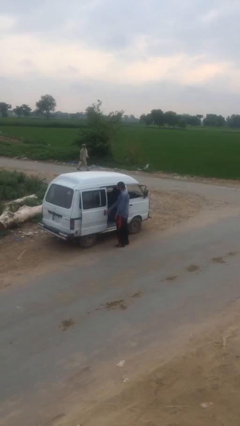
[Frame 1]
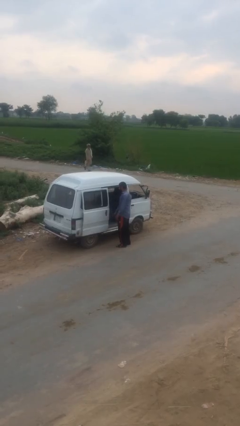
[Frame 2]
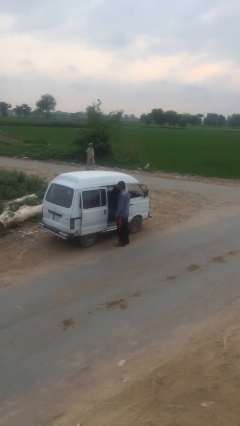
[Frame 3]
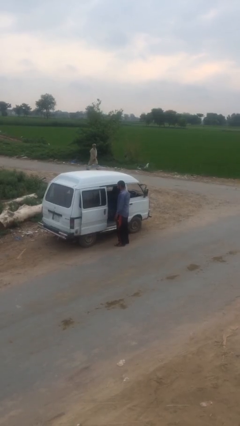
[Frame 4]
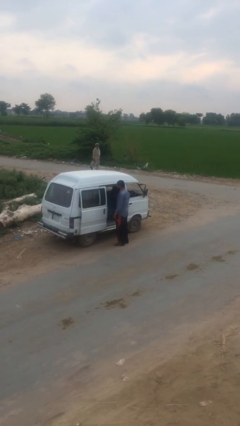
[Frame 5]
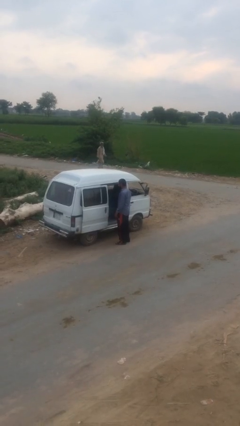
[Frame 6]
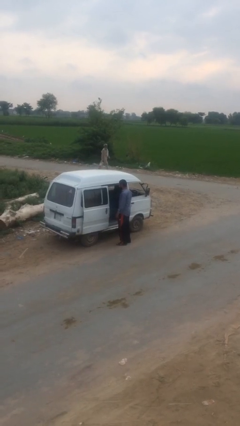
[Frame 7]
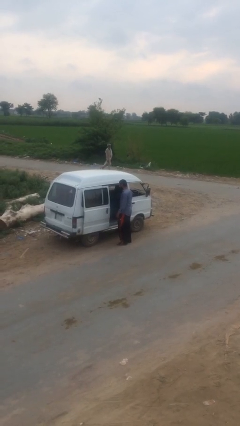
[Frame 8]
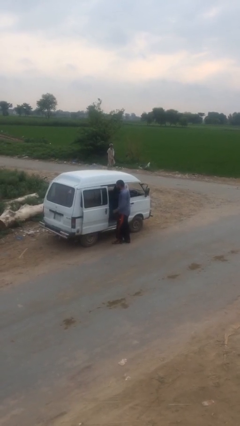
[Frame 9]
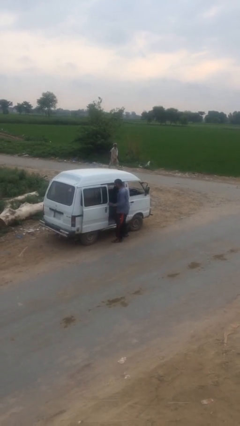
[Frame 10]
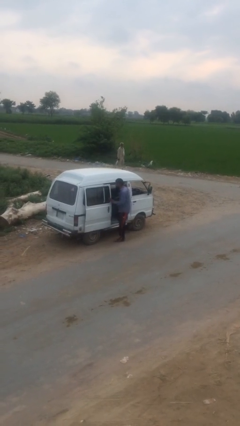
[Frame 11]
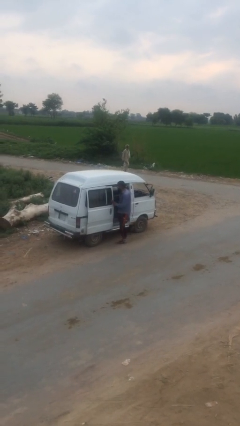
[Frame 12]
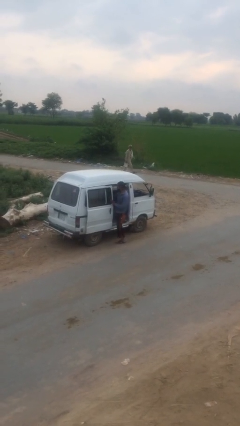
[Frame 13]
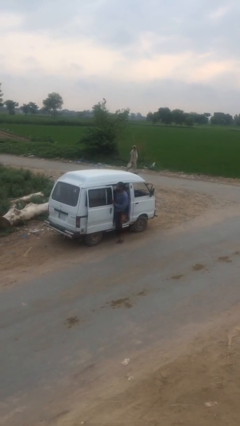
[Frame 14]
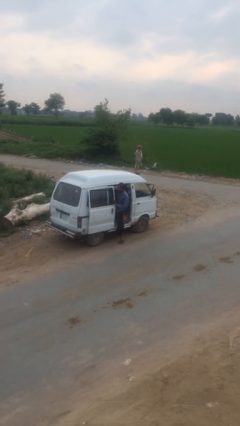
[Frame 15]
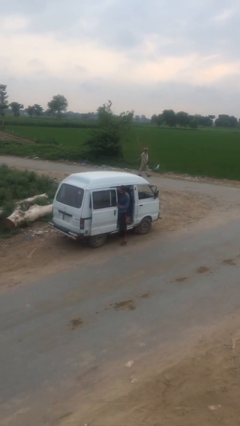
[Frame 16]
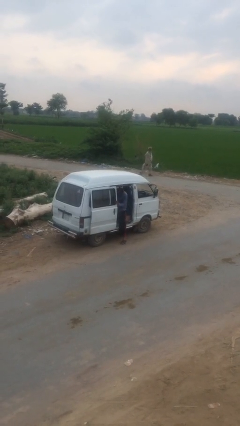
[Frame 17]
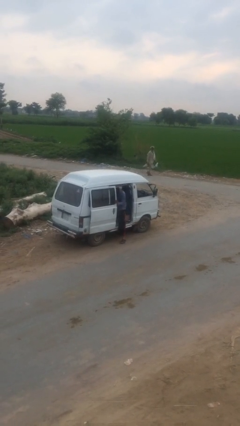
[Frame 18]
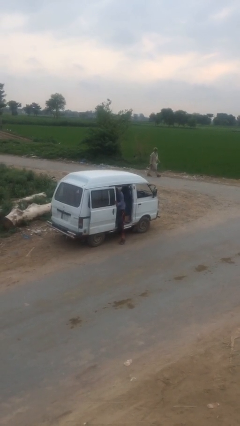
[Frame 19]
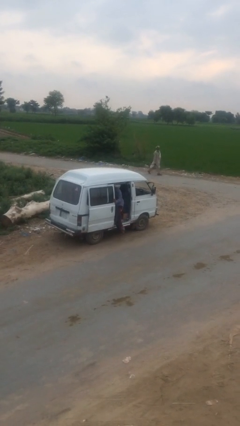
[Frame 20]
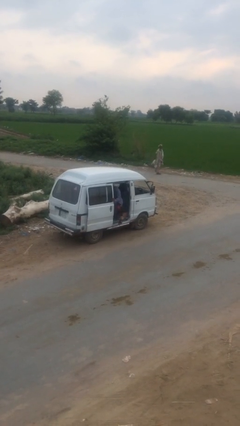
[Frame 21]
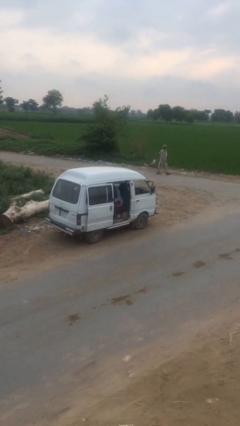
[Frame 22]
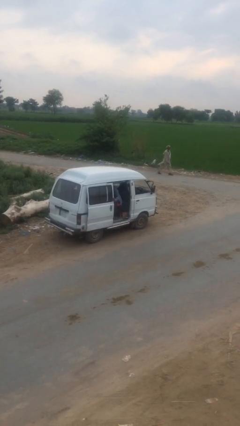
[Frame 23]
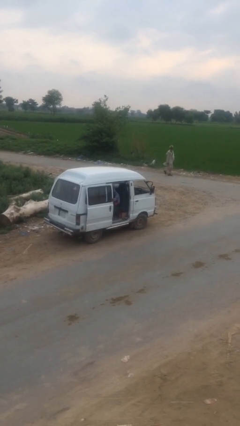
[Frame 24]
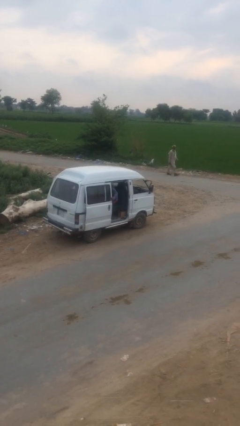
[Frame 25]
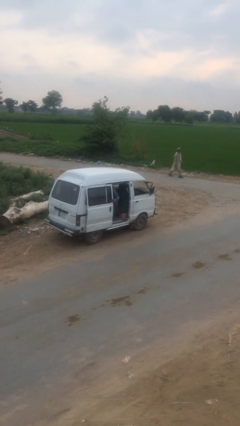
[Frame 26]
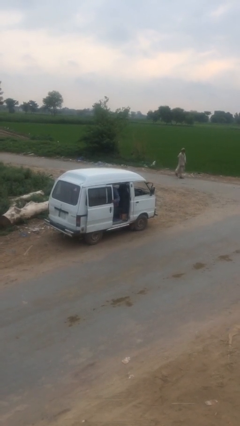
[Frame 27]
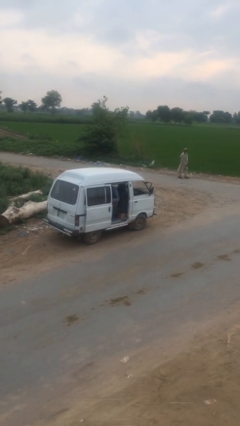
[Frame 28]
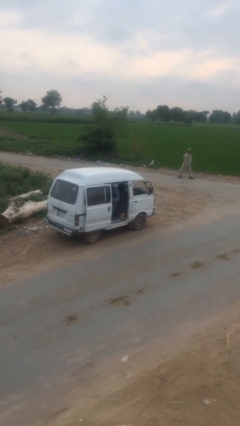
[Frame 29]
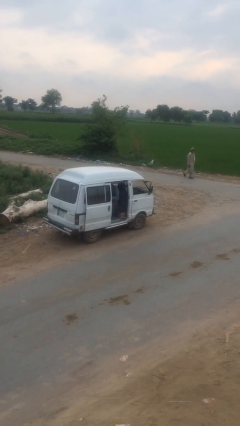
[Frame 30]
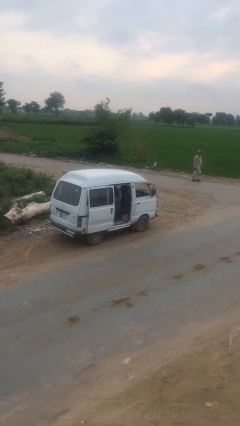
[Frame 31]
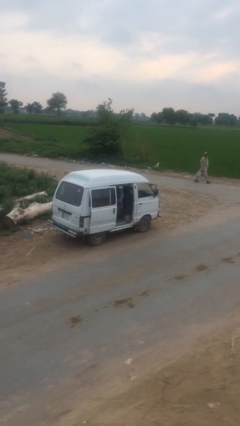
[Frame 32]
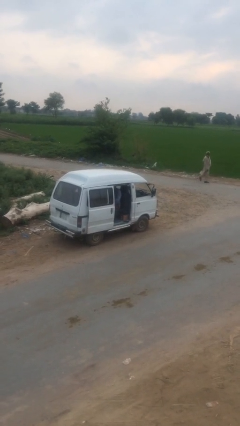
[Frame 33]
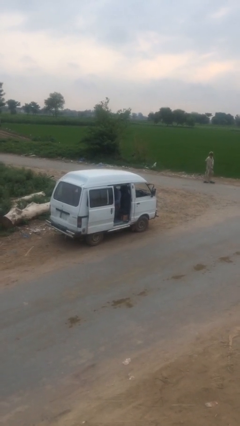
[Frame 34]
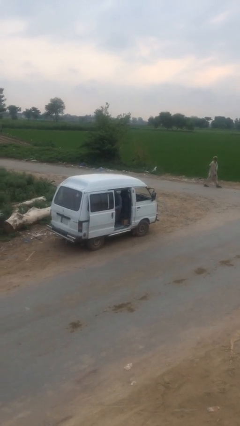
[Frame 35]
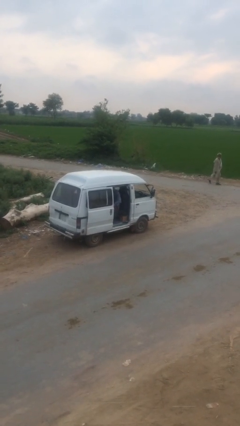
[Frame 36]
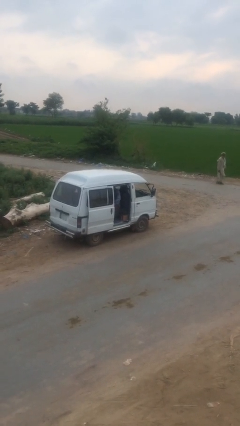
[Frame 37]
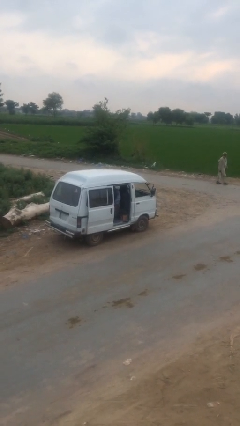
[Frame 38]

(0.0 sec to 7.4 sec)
person enters car

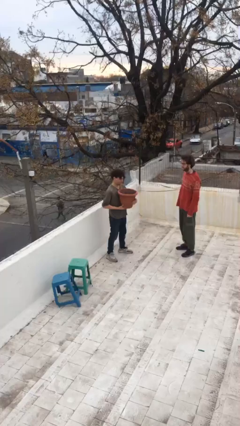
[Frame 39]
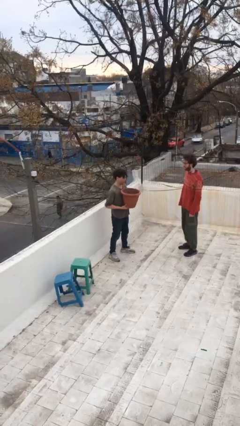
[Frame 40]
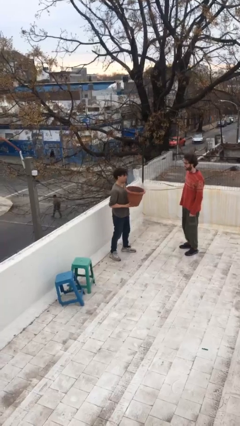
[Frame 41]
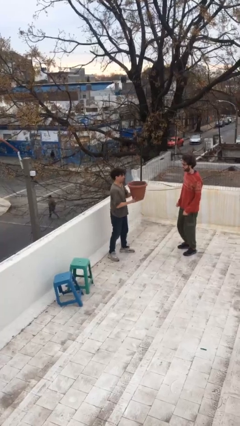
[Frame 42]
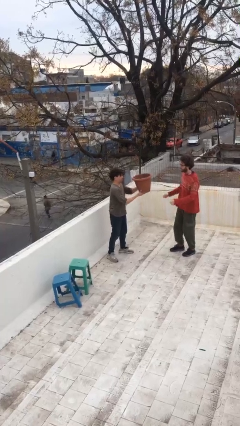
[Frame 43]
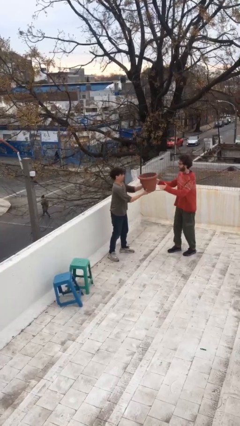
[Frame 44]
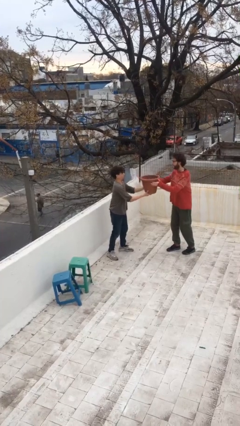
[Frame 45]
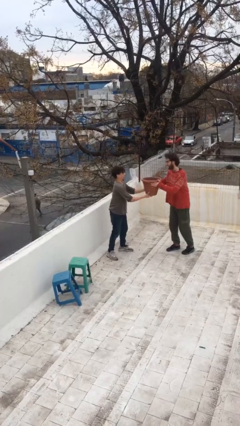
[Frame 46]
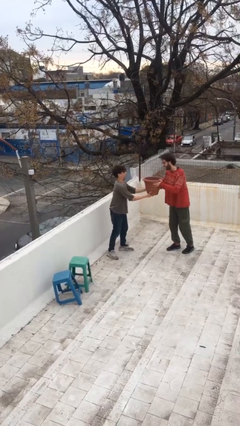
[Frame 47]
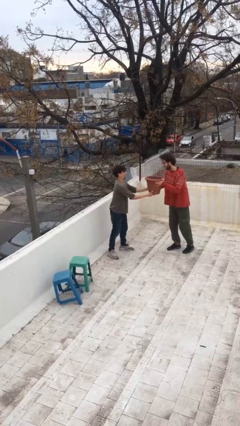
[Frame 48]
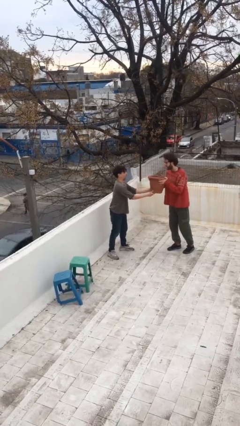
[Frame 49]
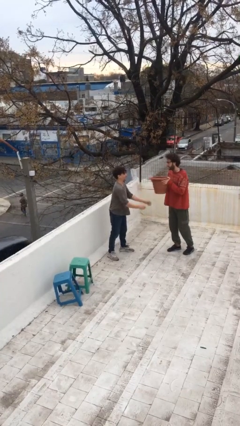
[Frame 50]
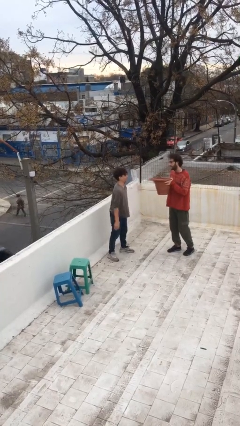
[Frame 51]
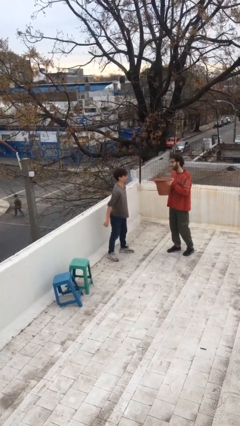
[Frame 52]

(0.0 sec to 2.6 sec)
person transfers object to person

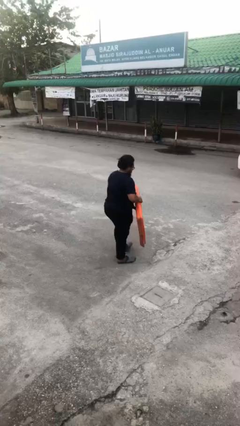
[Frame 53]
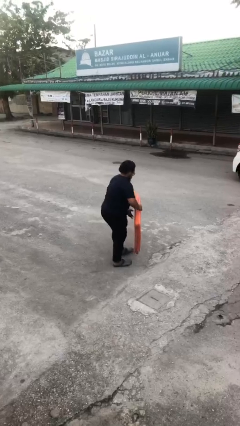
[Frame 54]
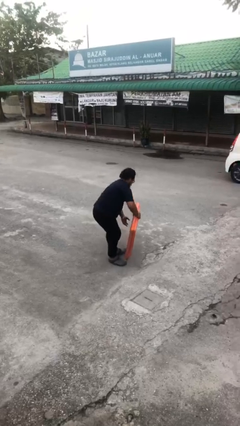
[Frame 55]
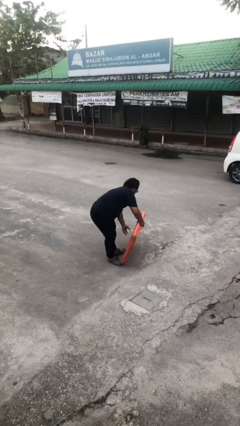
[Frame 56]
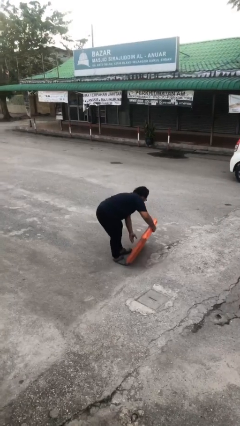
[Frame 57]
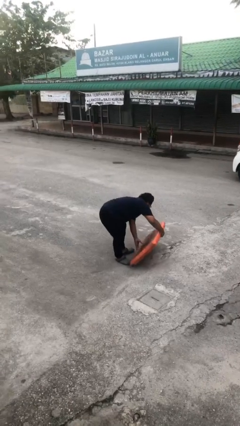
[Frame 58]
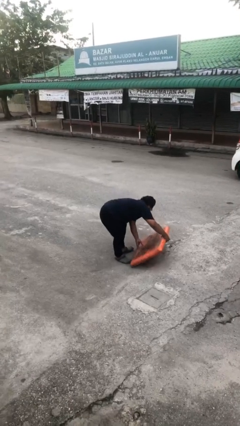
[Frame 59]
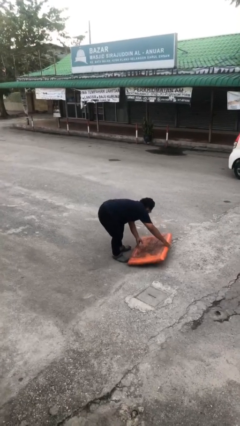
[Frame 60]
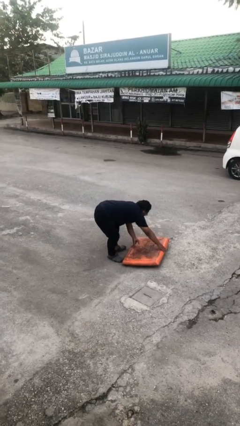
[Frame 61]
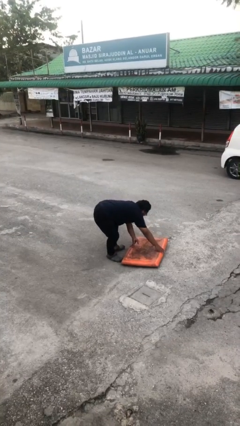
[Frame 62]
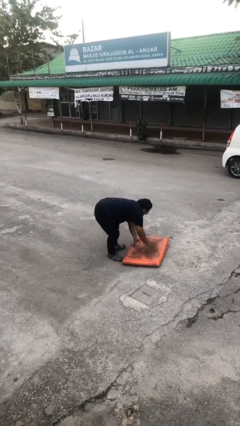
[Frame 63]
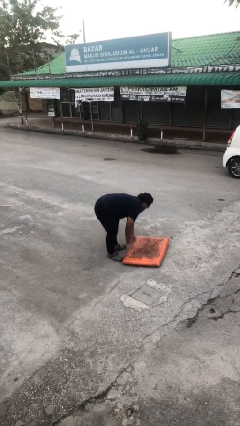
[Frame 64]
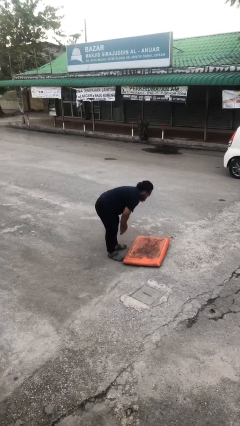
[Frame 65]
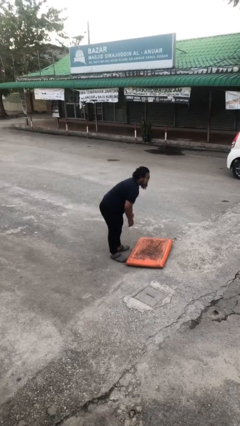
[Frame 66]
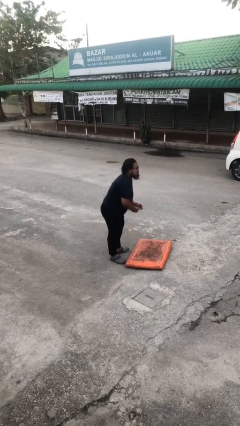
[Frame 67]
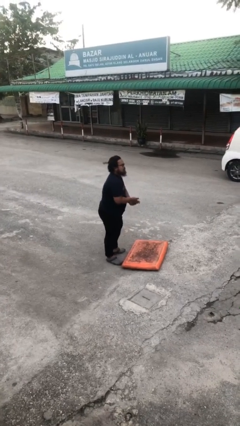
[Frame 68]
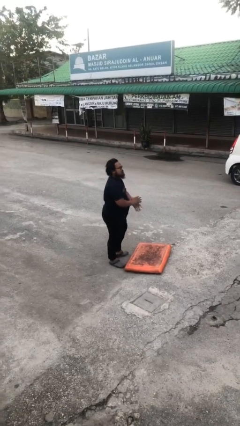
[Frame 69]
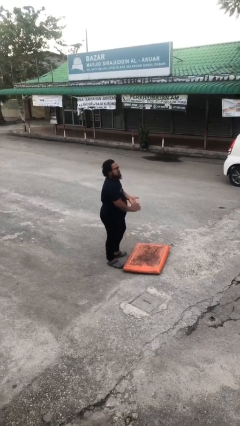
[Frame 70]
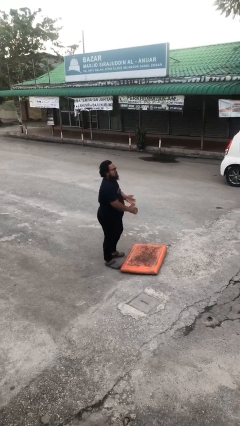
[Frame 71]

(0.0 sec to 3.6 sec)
person puts down object on floor

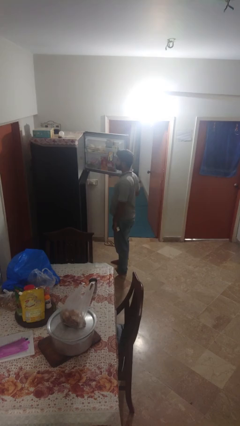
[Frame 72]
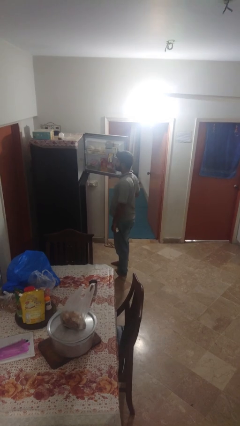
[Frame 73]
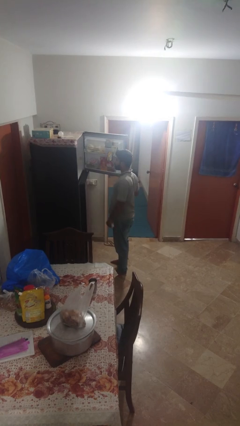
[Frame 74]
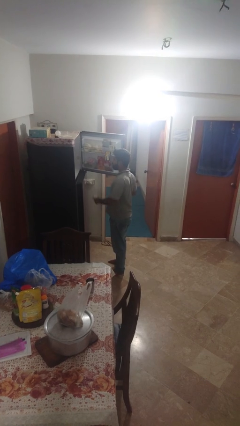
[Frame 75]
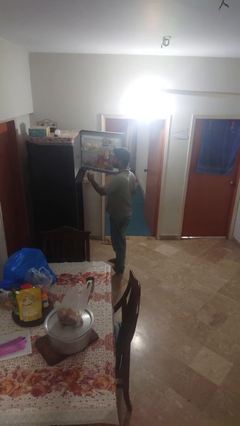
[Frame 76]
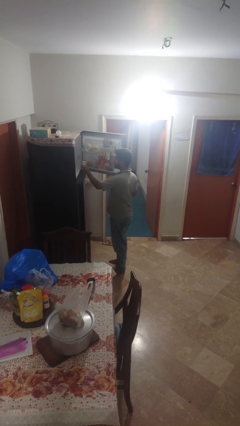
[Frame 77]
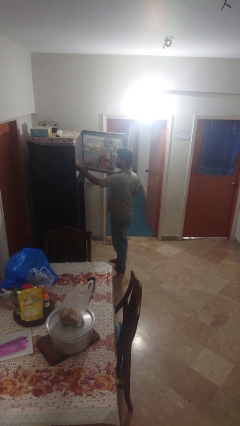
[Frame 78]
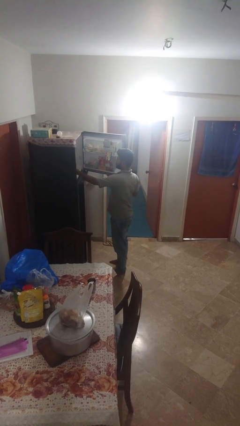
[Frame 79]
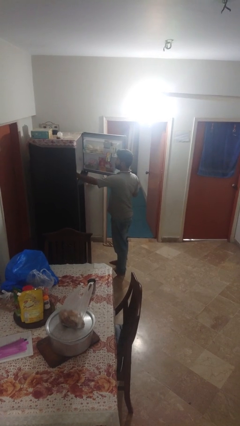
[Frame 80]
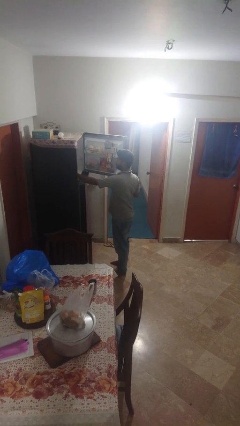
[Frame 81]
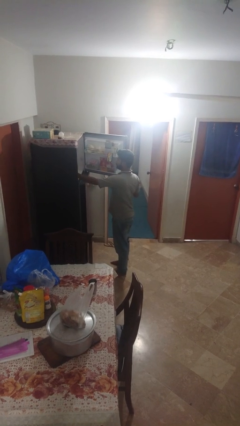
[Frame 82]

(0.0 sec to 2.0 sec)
person puts object into refrigerator

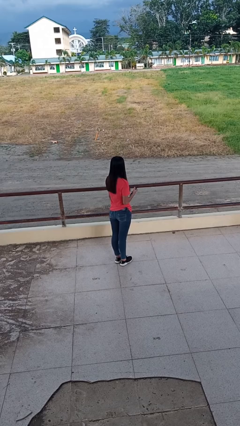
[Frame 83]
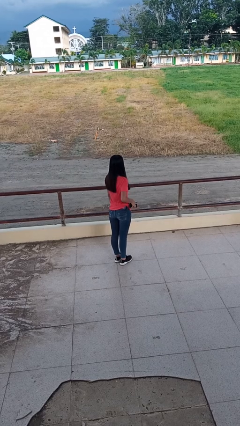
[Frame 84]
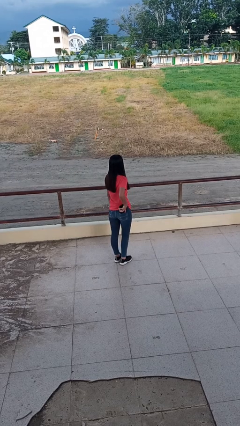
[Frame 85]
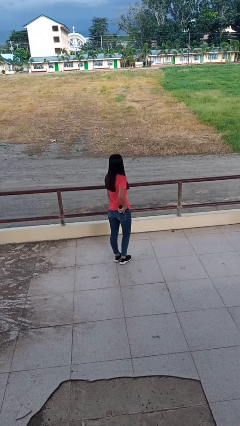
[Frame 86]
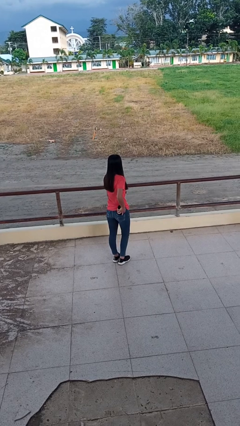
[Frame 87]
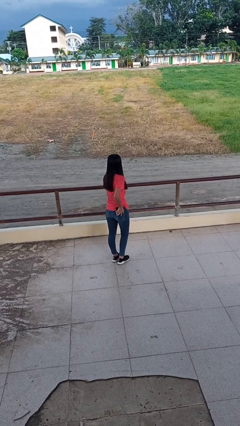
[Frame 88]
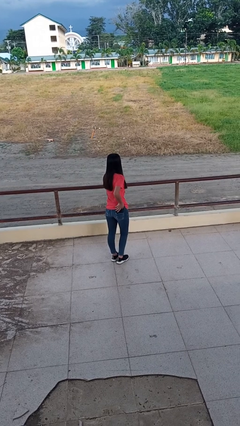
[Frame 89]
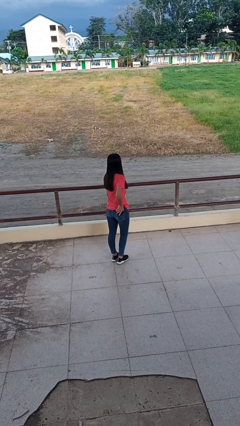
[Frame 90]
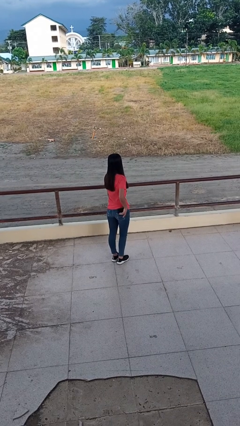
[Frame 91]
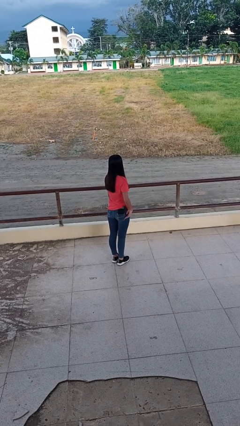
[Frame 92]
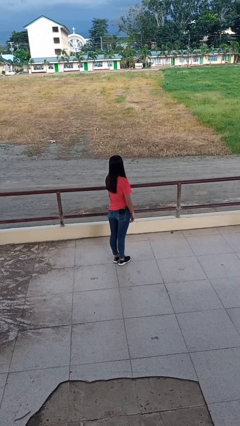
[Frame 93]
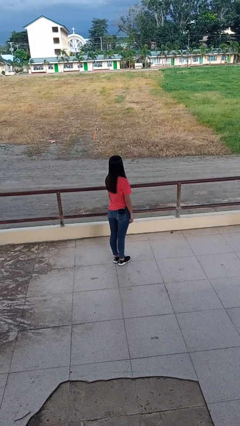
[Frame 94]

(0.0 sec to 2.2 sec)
person puts phone into pocket
